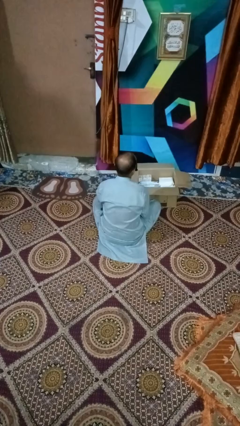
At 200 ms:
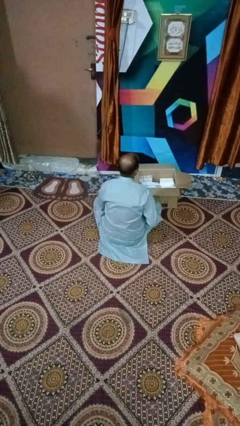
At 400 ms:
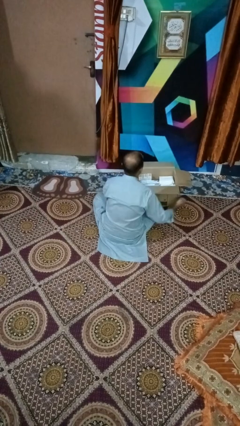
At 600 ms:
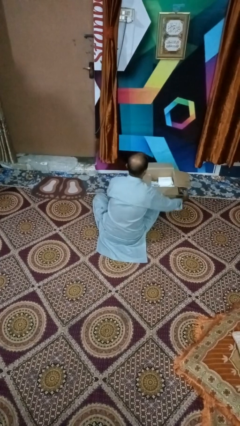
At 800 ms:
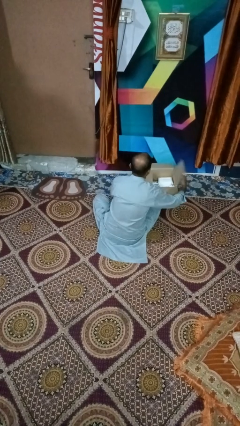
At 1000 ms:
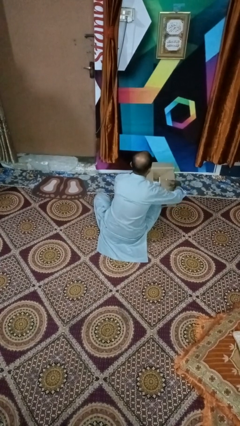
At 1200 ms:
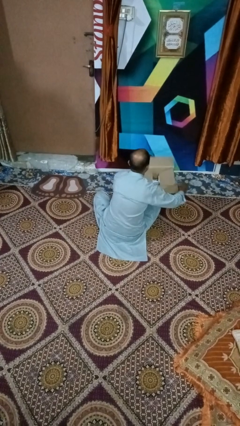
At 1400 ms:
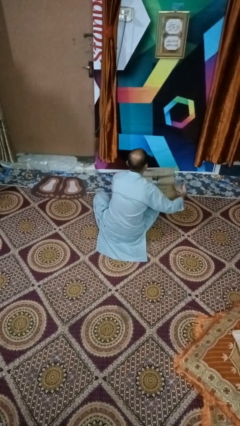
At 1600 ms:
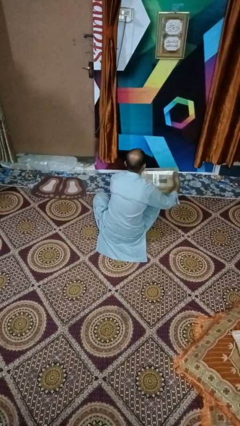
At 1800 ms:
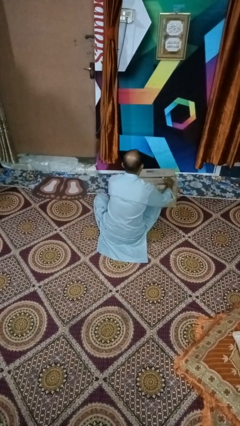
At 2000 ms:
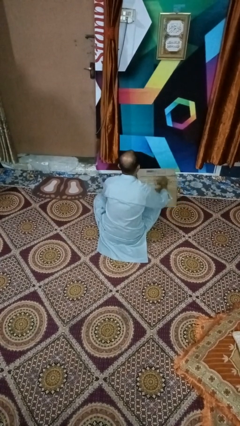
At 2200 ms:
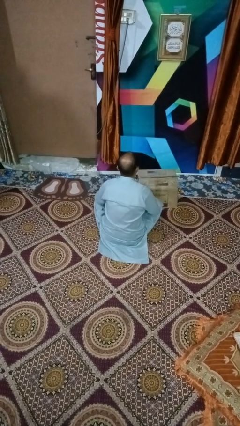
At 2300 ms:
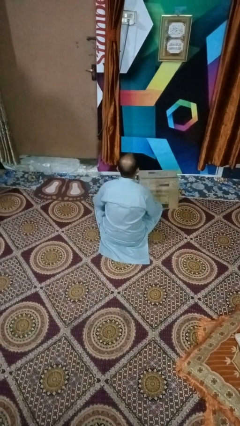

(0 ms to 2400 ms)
person closes box

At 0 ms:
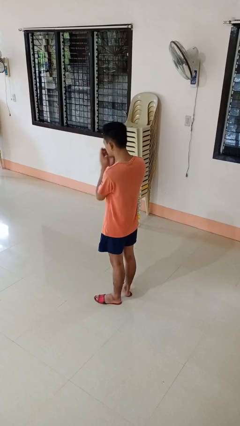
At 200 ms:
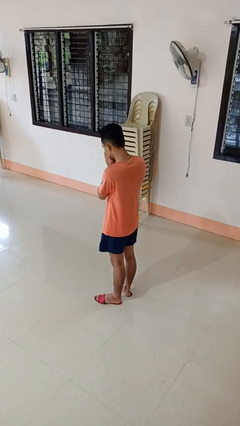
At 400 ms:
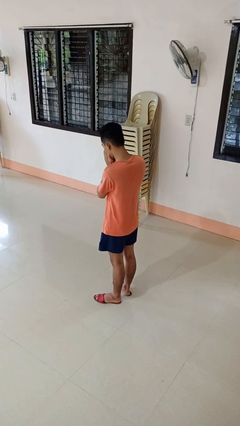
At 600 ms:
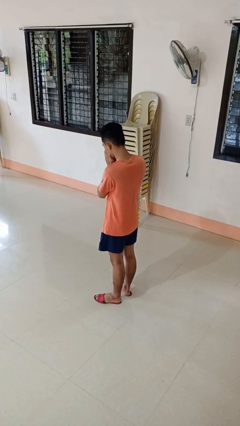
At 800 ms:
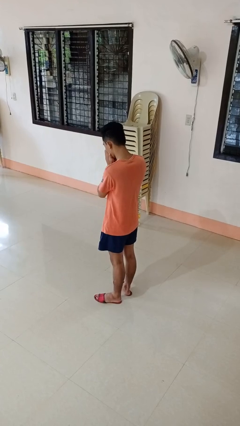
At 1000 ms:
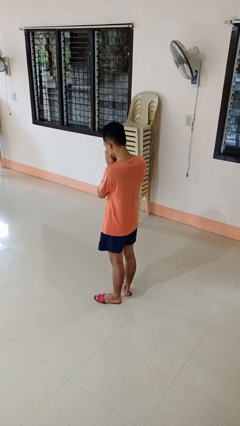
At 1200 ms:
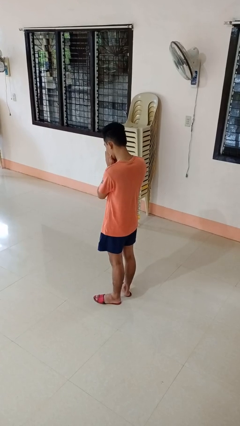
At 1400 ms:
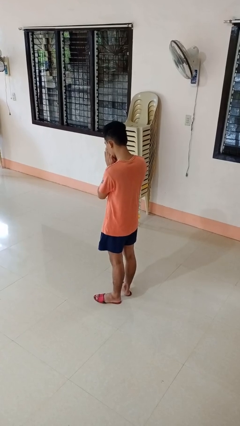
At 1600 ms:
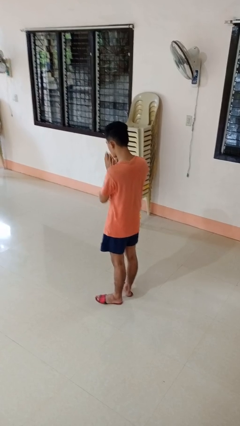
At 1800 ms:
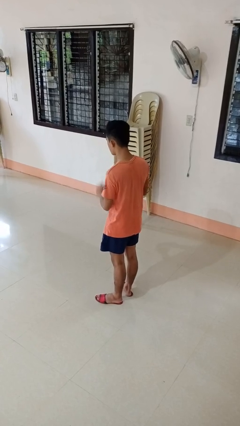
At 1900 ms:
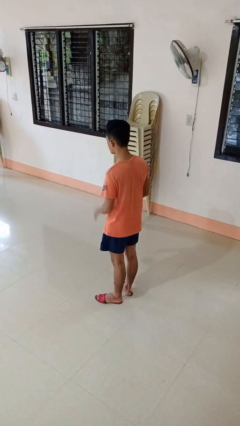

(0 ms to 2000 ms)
person sneezes into hand

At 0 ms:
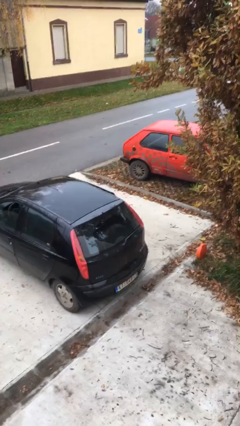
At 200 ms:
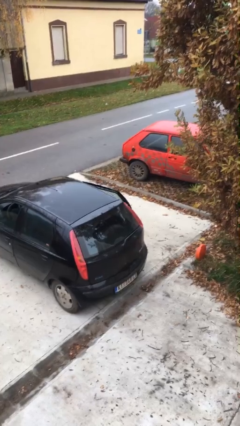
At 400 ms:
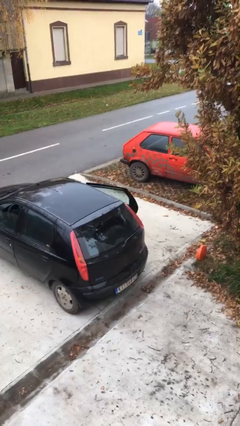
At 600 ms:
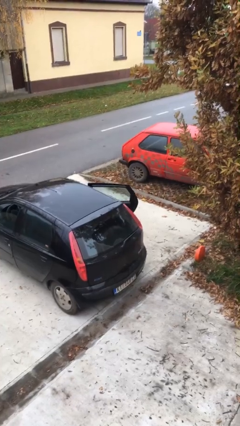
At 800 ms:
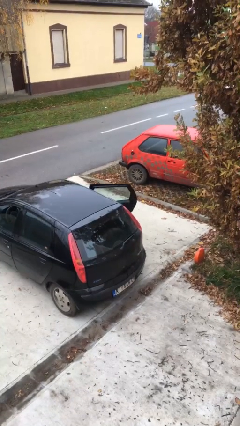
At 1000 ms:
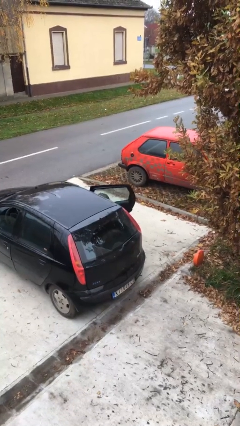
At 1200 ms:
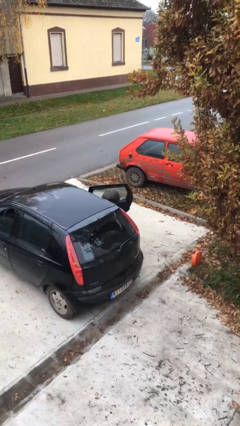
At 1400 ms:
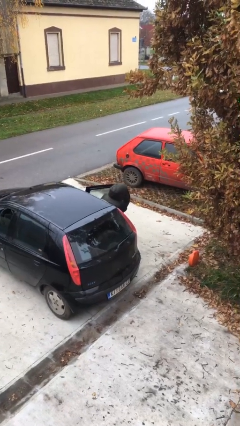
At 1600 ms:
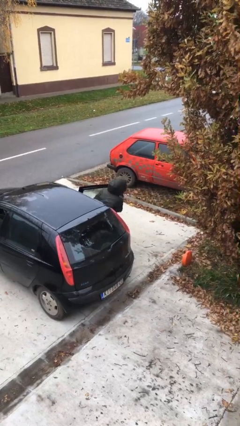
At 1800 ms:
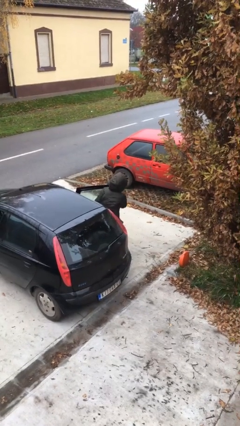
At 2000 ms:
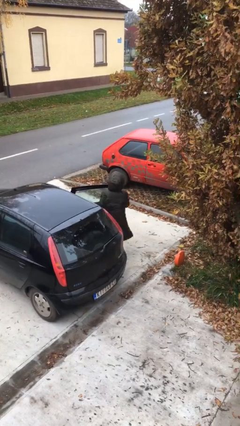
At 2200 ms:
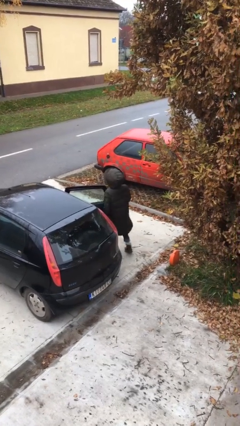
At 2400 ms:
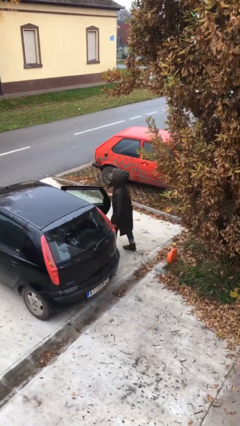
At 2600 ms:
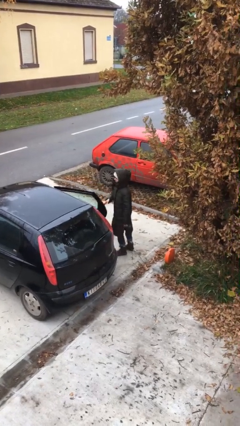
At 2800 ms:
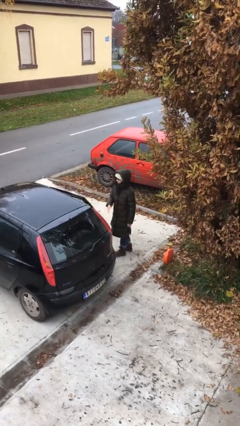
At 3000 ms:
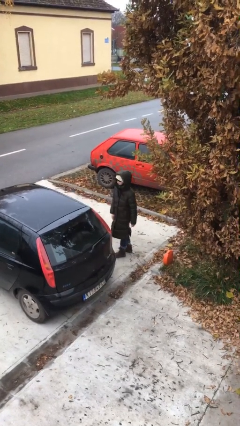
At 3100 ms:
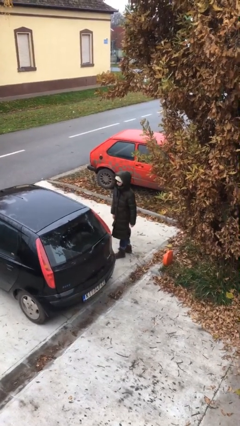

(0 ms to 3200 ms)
person exits car

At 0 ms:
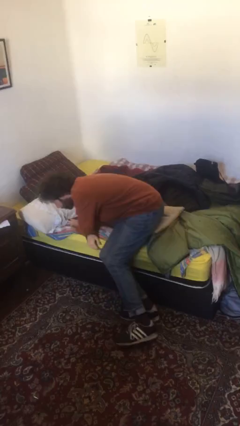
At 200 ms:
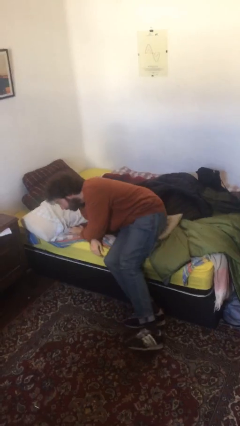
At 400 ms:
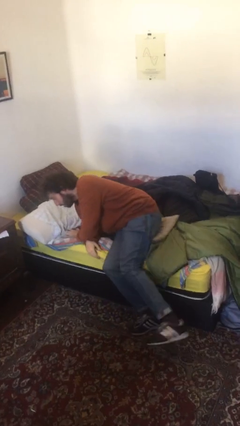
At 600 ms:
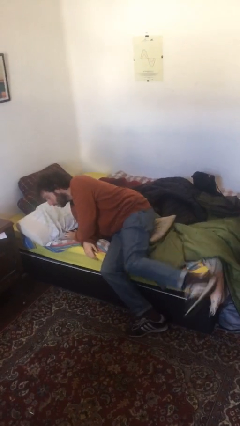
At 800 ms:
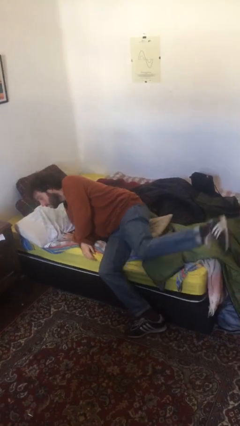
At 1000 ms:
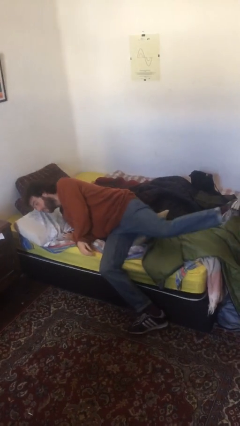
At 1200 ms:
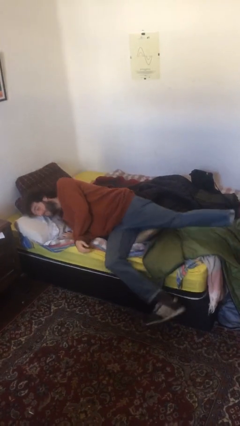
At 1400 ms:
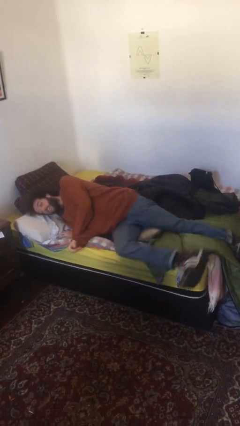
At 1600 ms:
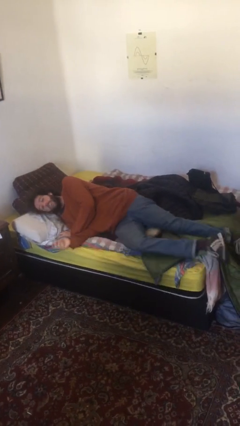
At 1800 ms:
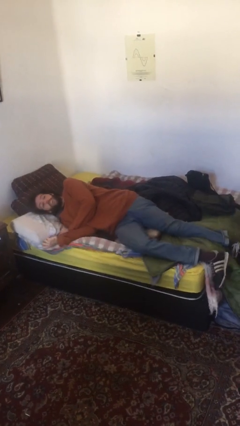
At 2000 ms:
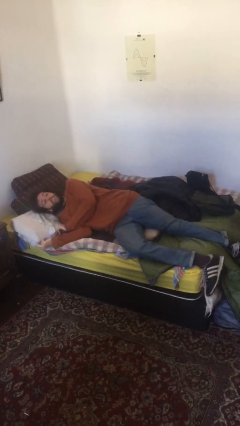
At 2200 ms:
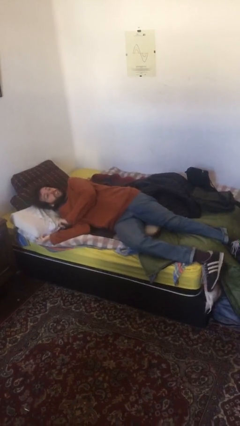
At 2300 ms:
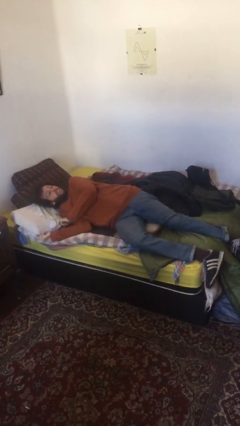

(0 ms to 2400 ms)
person lies down on bed

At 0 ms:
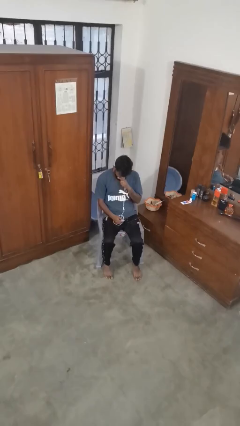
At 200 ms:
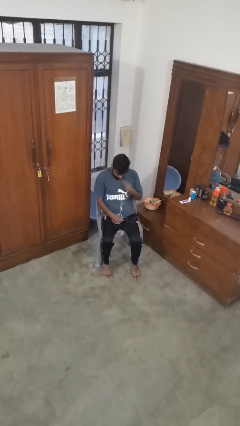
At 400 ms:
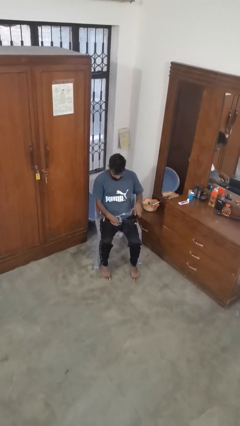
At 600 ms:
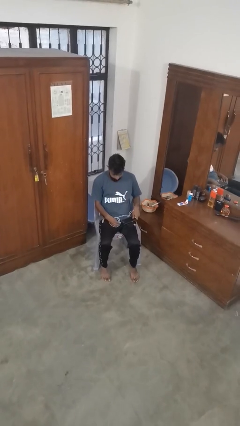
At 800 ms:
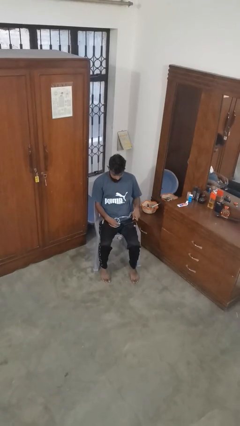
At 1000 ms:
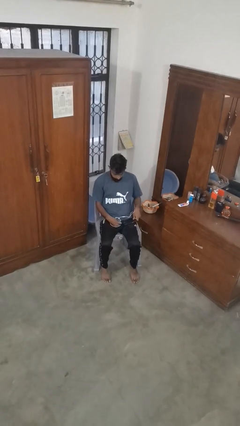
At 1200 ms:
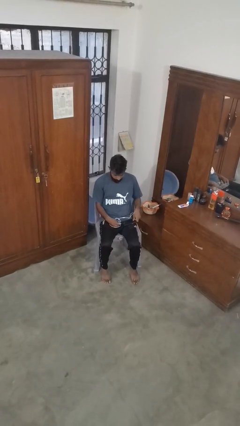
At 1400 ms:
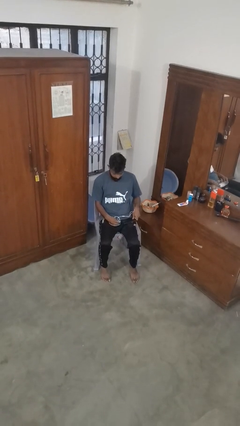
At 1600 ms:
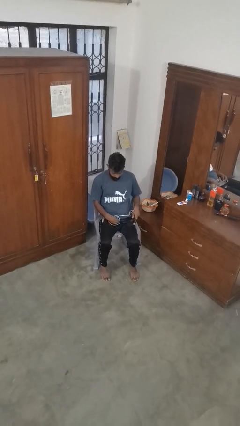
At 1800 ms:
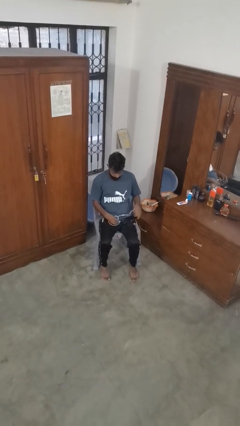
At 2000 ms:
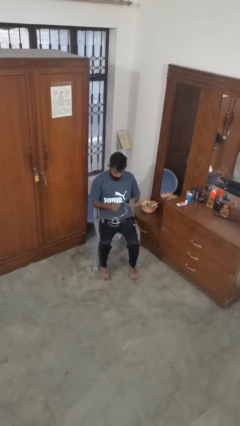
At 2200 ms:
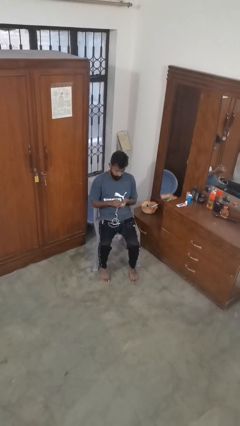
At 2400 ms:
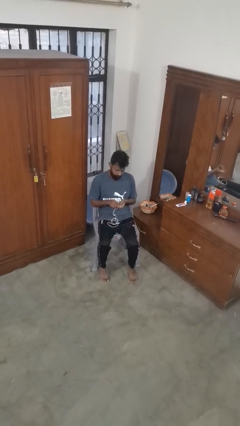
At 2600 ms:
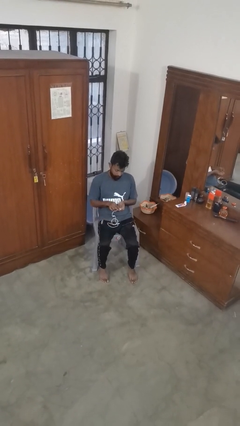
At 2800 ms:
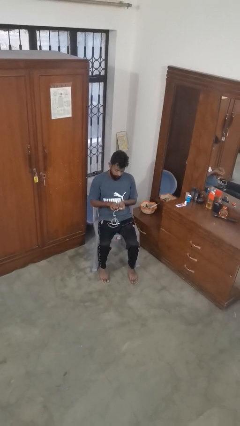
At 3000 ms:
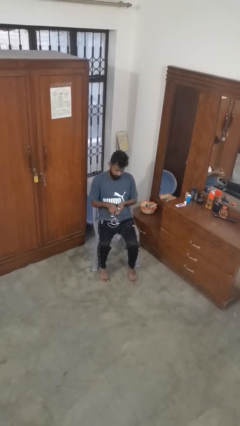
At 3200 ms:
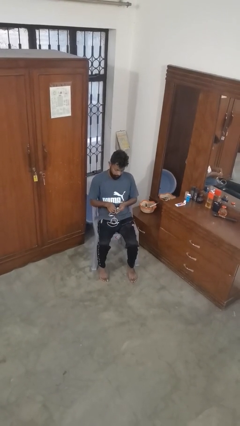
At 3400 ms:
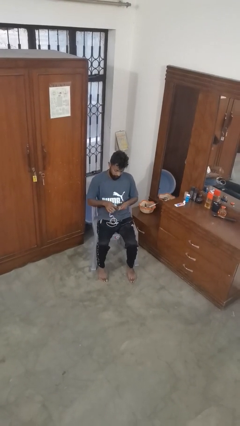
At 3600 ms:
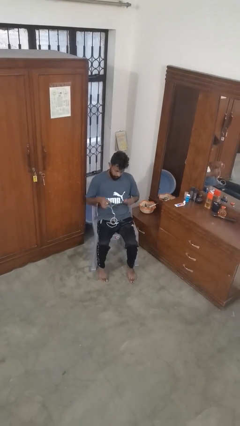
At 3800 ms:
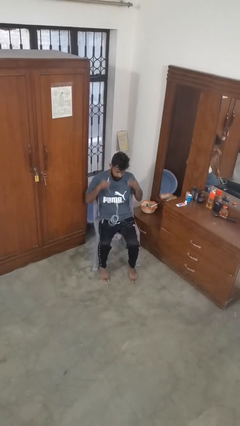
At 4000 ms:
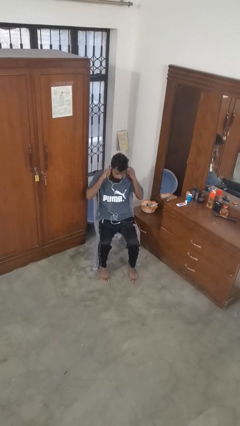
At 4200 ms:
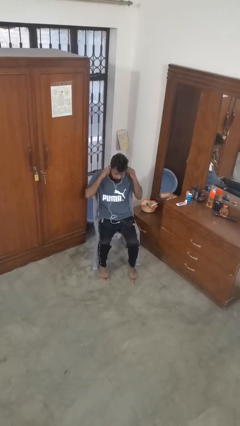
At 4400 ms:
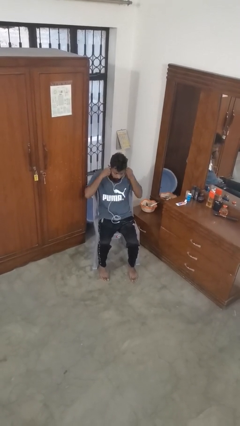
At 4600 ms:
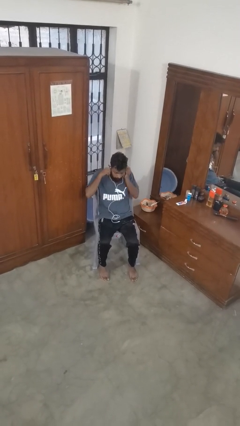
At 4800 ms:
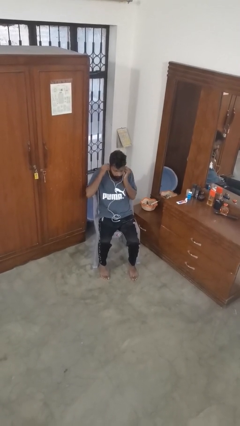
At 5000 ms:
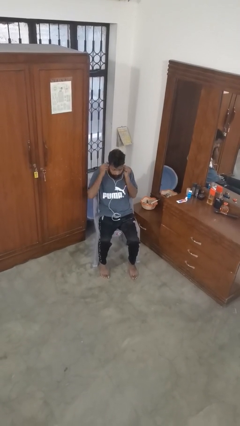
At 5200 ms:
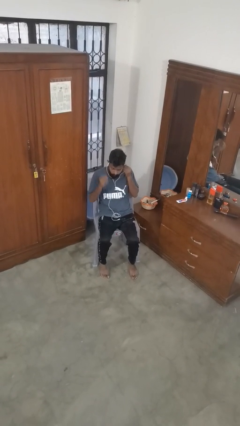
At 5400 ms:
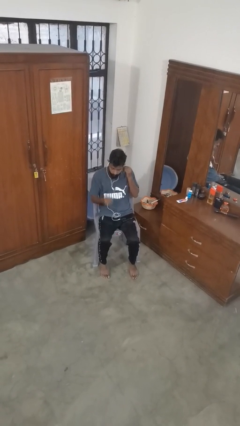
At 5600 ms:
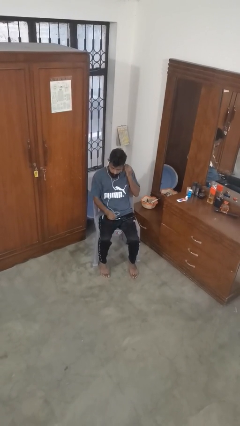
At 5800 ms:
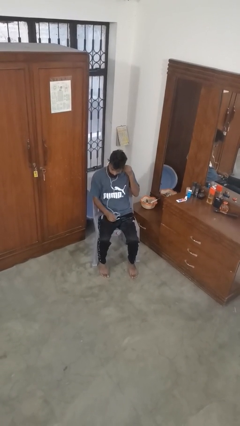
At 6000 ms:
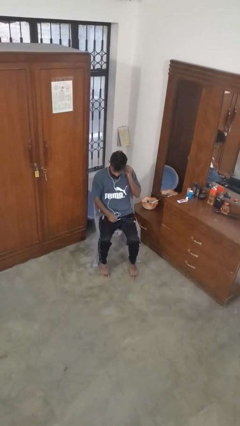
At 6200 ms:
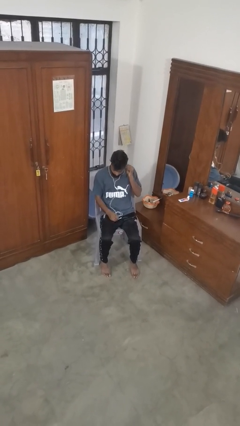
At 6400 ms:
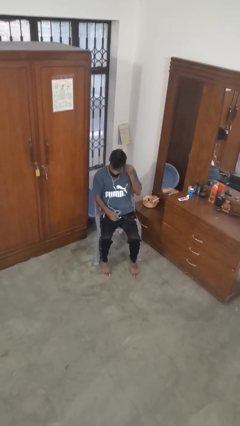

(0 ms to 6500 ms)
person puts on headphones

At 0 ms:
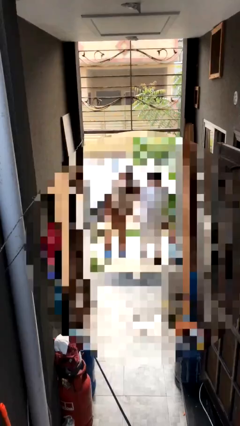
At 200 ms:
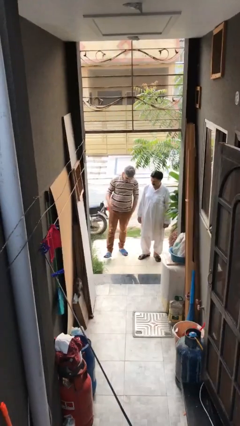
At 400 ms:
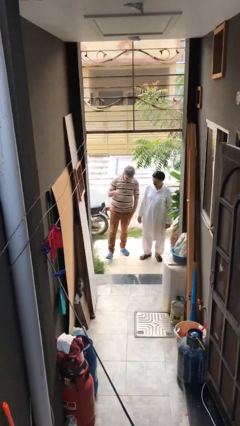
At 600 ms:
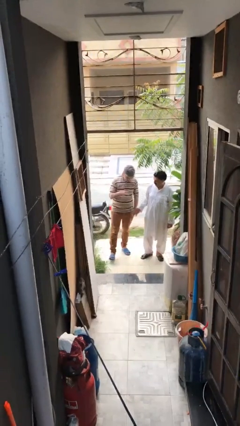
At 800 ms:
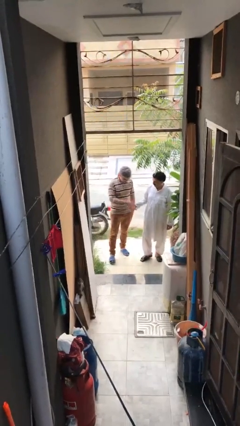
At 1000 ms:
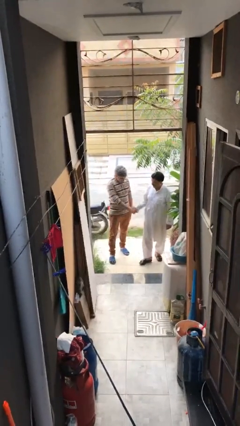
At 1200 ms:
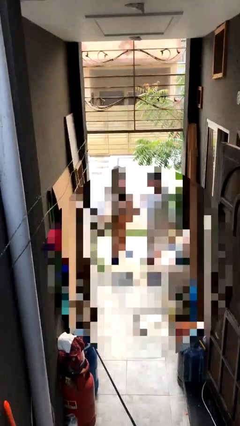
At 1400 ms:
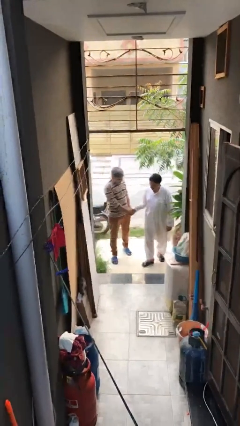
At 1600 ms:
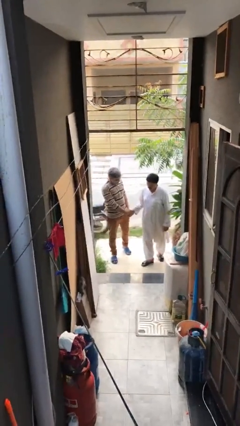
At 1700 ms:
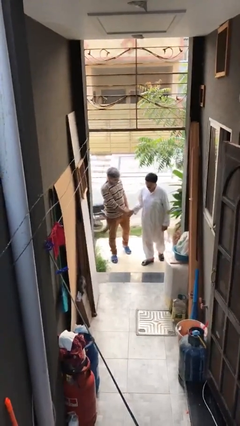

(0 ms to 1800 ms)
person shakes hand
